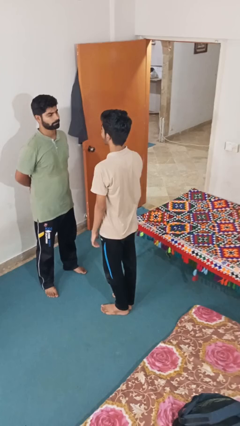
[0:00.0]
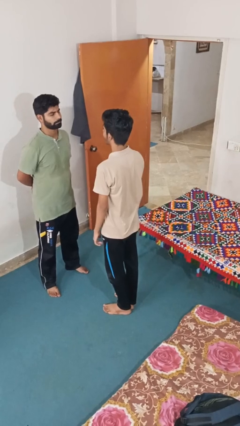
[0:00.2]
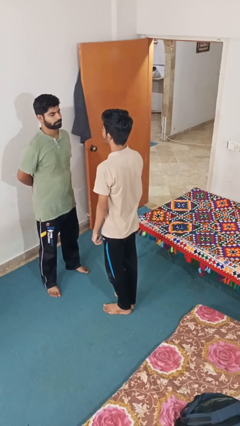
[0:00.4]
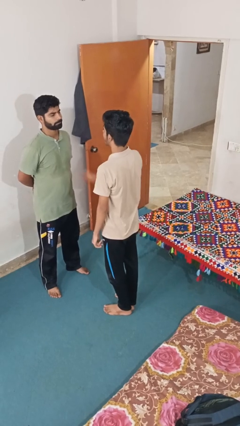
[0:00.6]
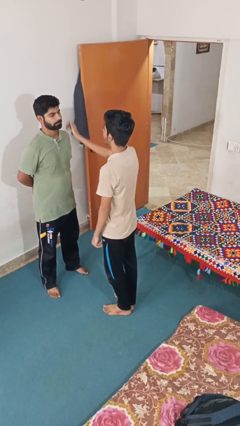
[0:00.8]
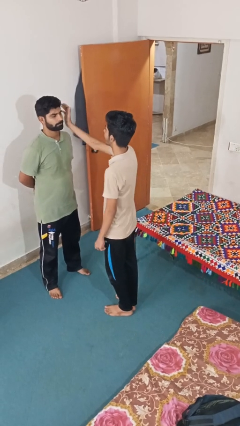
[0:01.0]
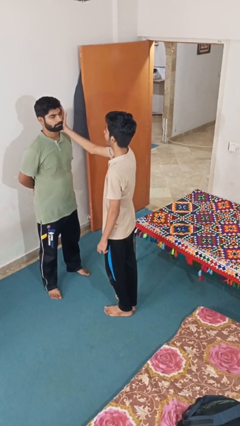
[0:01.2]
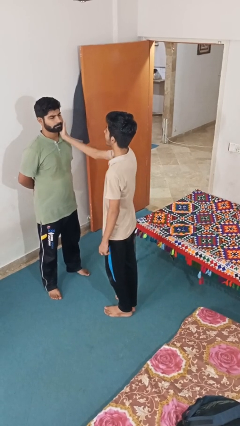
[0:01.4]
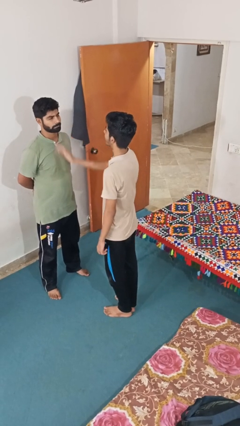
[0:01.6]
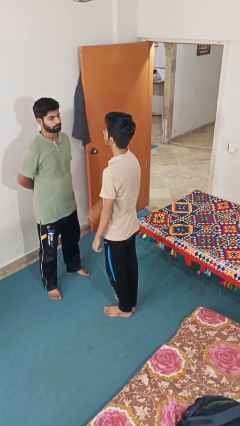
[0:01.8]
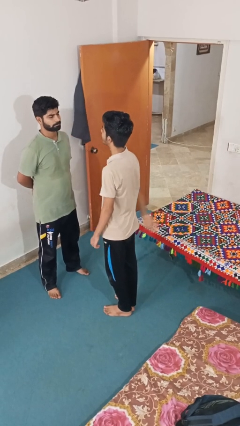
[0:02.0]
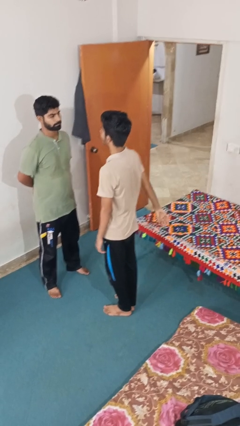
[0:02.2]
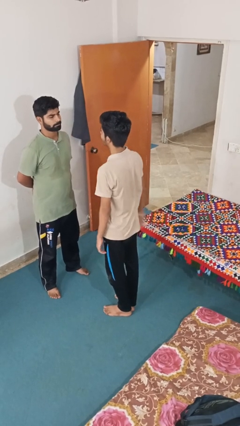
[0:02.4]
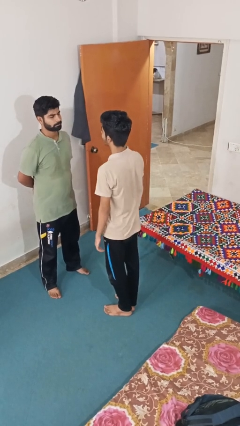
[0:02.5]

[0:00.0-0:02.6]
person touches face of person

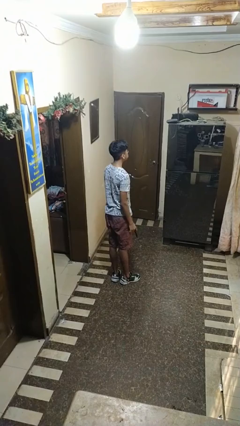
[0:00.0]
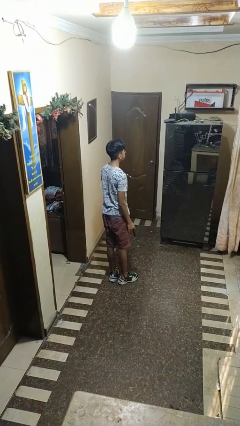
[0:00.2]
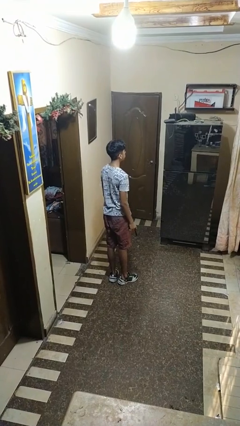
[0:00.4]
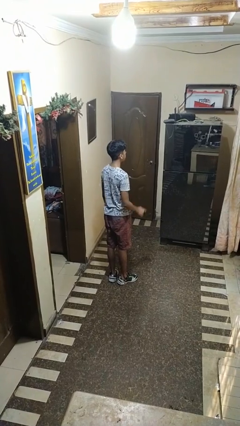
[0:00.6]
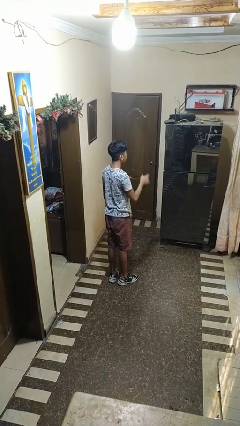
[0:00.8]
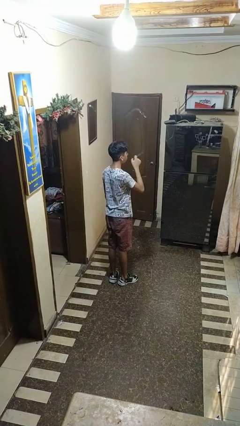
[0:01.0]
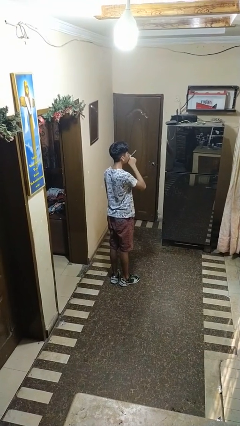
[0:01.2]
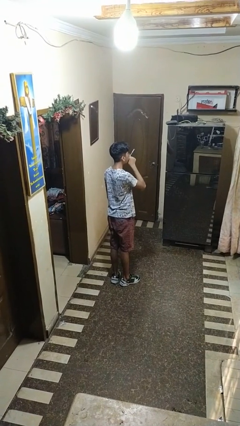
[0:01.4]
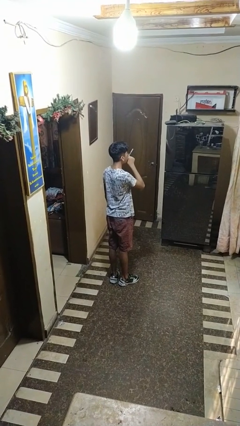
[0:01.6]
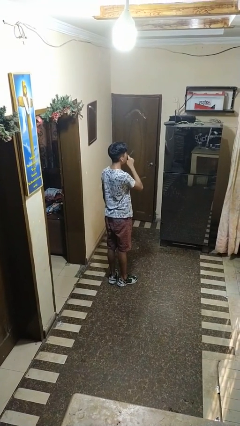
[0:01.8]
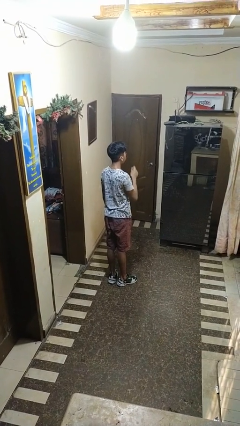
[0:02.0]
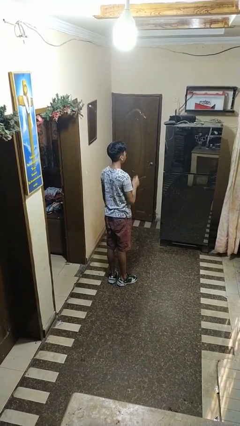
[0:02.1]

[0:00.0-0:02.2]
person vapes

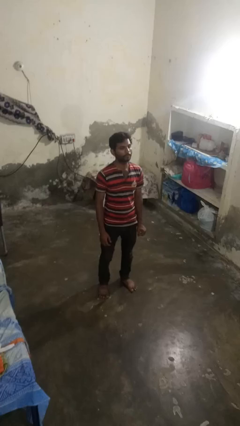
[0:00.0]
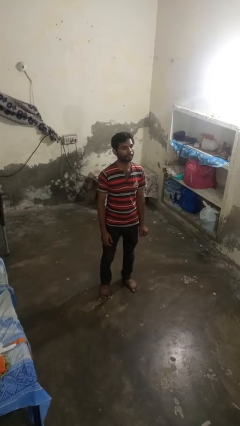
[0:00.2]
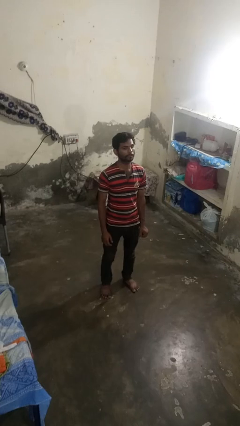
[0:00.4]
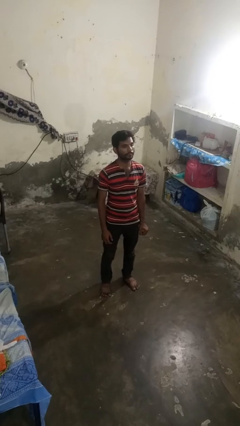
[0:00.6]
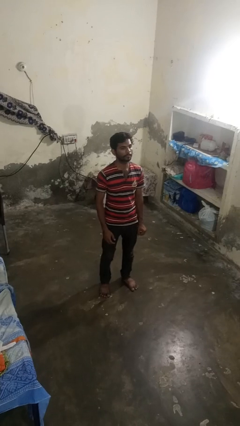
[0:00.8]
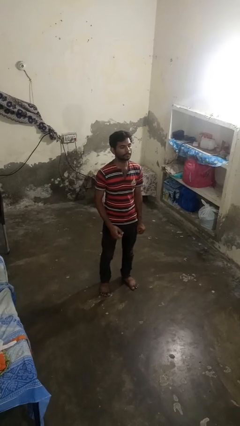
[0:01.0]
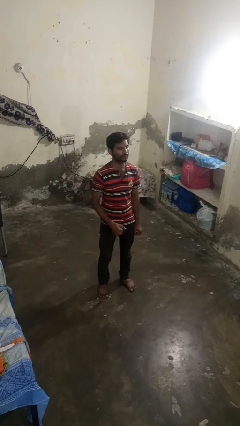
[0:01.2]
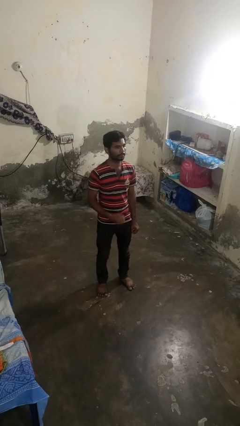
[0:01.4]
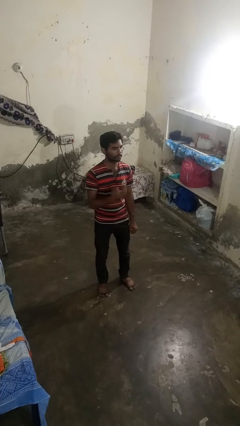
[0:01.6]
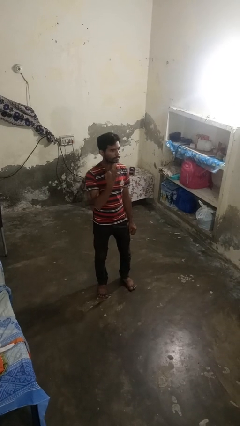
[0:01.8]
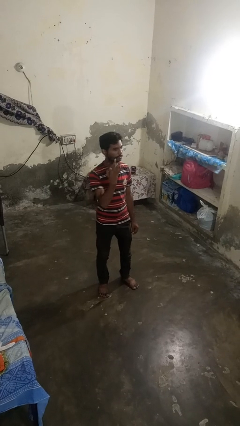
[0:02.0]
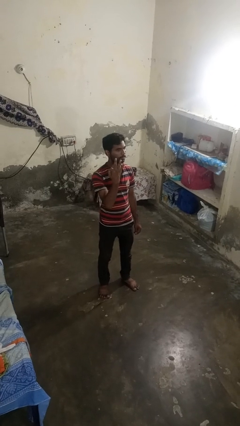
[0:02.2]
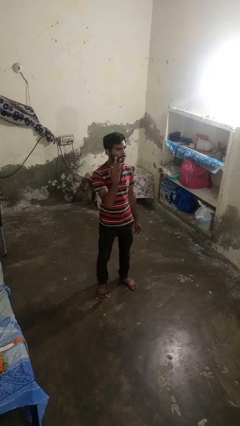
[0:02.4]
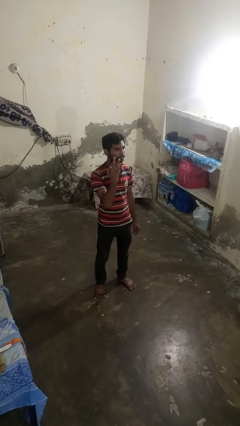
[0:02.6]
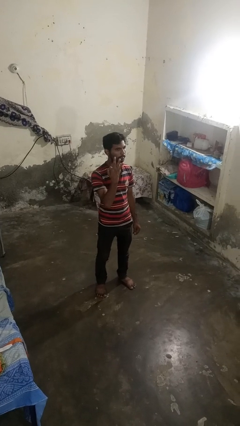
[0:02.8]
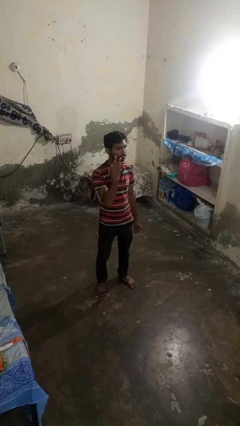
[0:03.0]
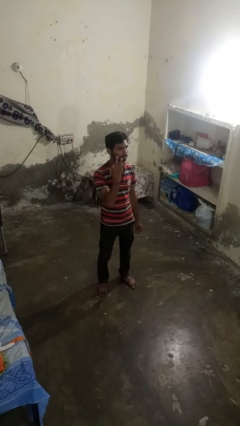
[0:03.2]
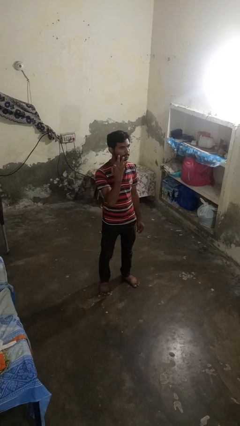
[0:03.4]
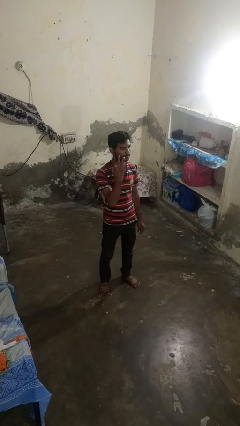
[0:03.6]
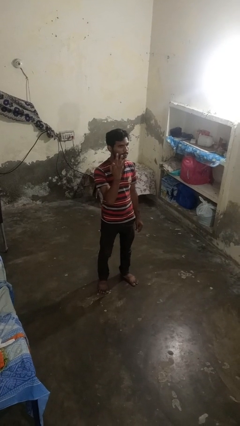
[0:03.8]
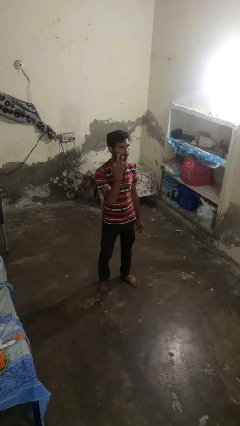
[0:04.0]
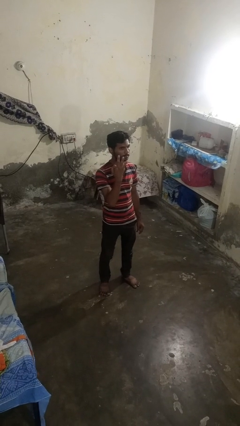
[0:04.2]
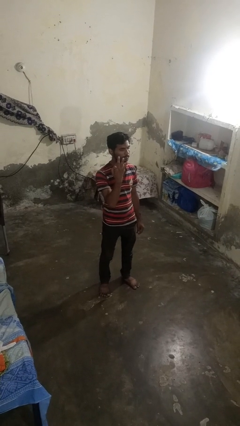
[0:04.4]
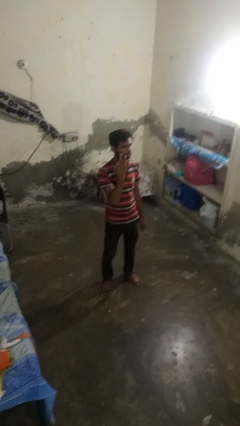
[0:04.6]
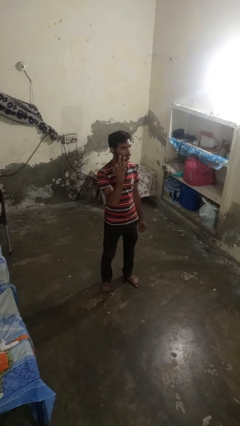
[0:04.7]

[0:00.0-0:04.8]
person gestures number three

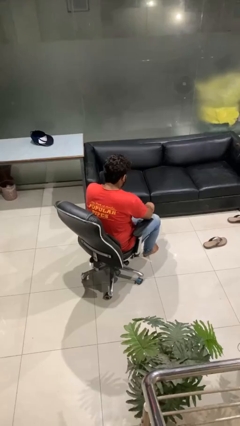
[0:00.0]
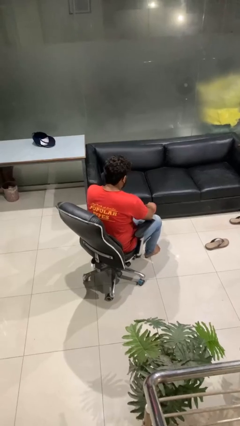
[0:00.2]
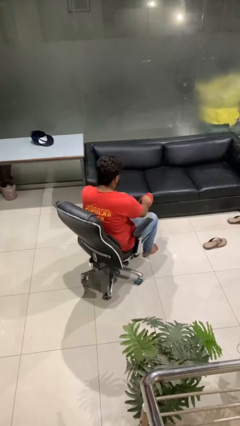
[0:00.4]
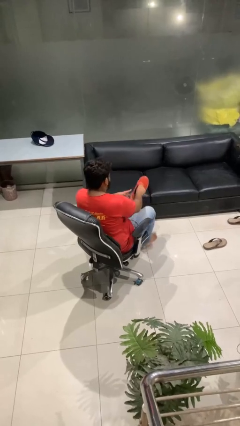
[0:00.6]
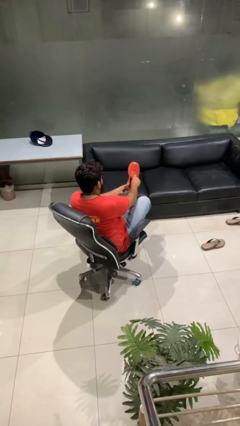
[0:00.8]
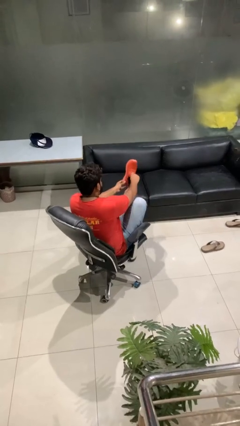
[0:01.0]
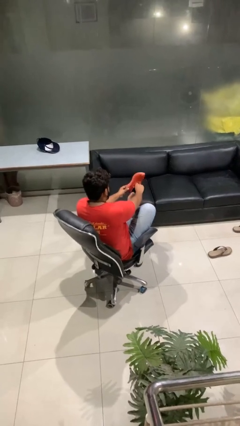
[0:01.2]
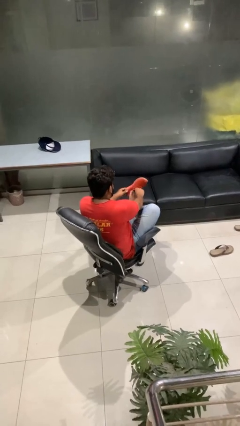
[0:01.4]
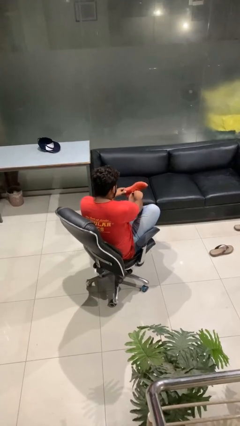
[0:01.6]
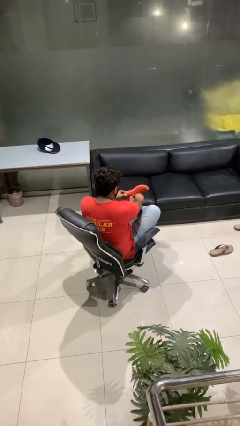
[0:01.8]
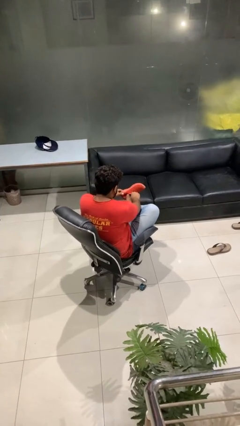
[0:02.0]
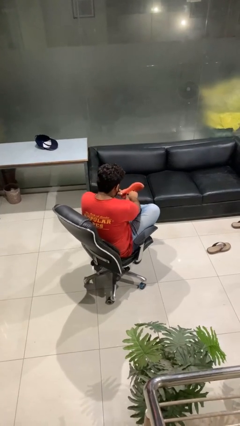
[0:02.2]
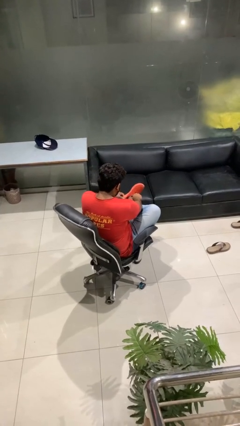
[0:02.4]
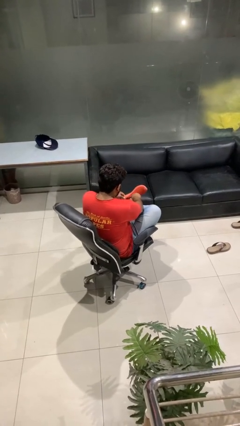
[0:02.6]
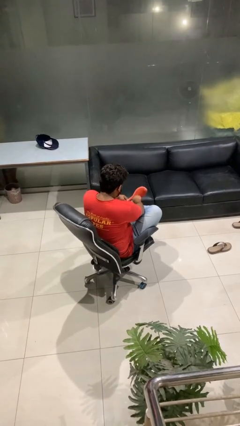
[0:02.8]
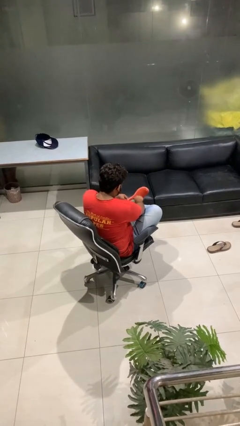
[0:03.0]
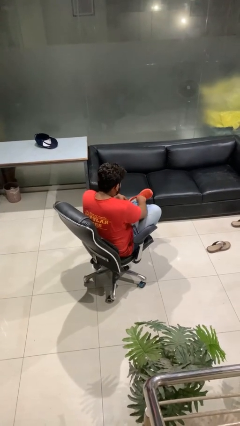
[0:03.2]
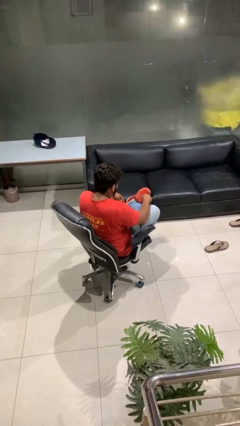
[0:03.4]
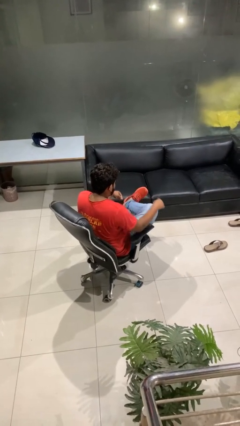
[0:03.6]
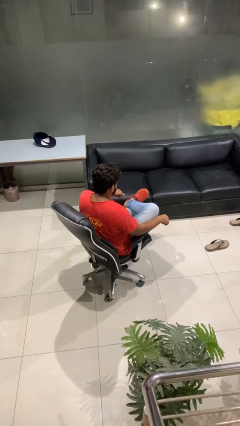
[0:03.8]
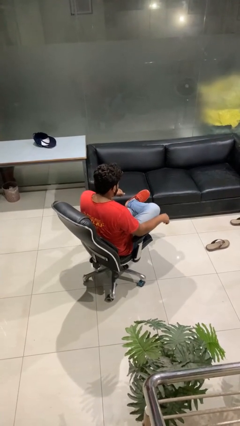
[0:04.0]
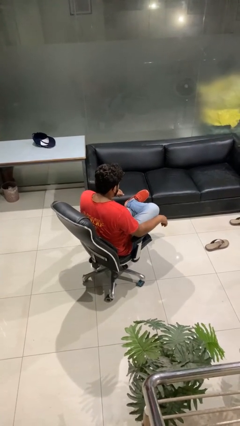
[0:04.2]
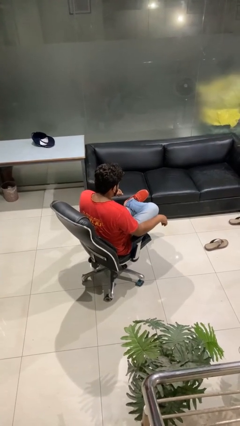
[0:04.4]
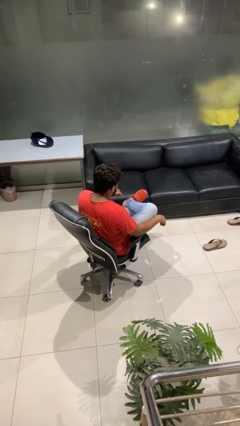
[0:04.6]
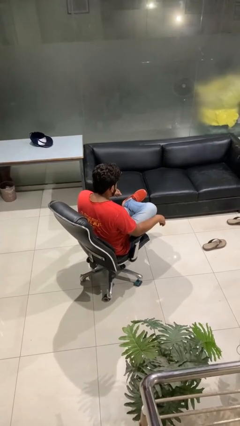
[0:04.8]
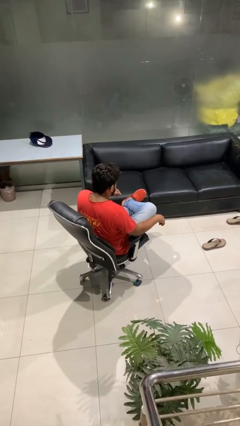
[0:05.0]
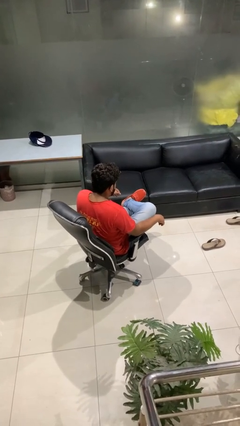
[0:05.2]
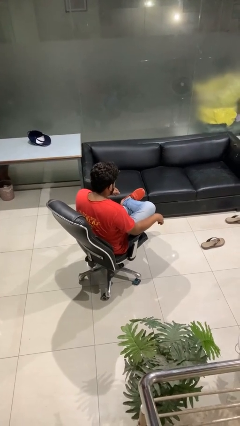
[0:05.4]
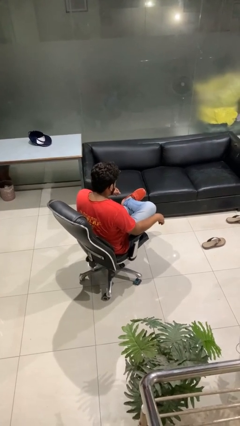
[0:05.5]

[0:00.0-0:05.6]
person puts on shoes

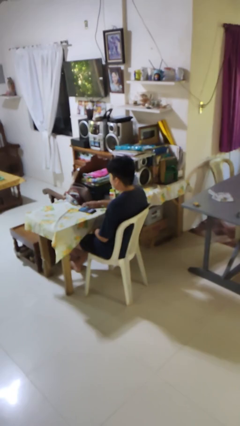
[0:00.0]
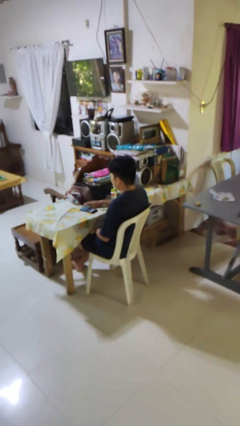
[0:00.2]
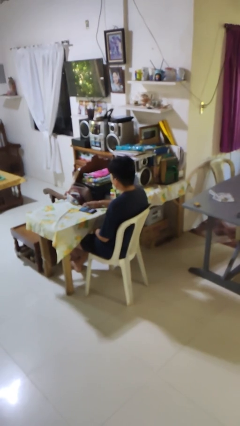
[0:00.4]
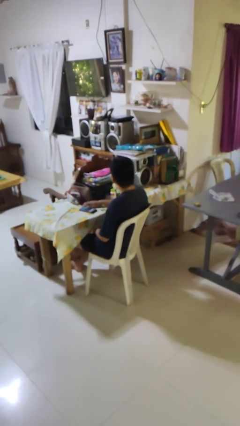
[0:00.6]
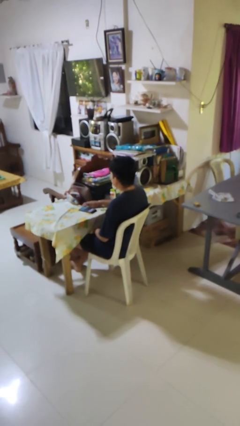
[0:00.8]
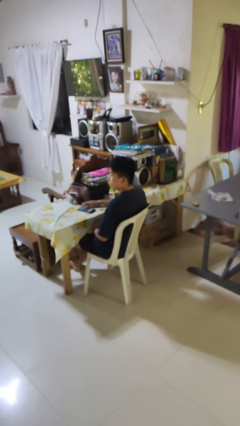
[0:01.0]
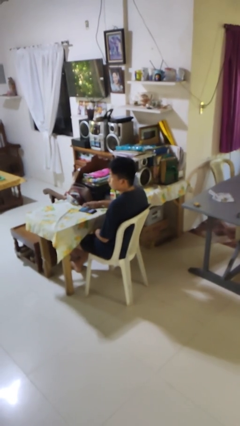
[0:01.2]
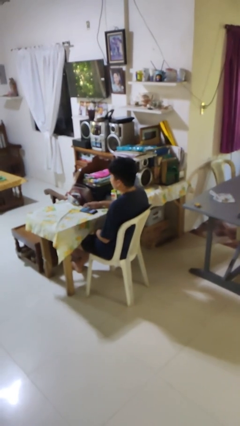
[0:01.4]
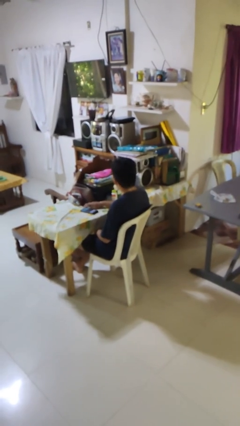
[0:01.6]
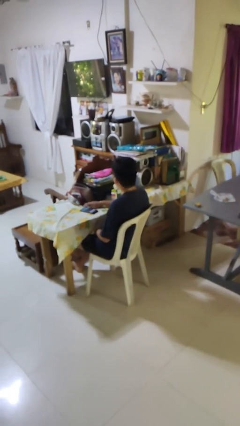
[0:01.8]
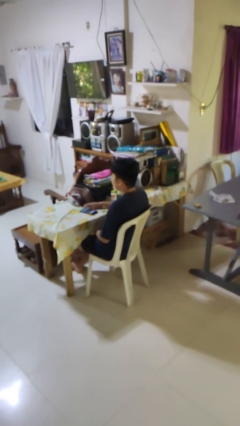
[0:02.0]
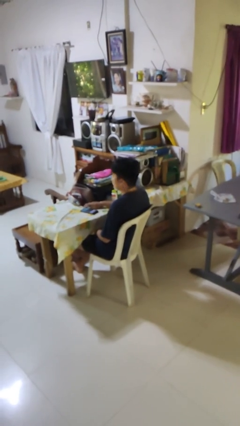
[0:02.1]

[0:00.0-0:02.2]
person shakes head
